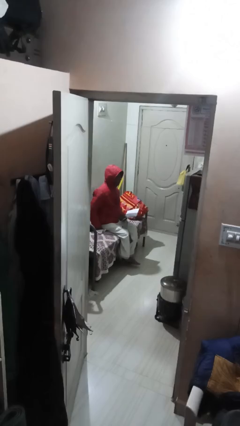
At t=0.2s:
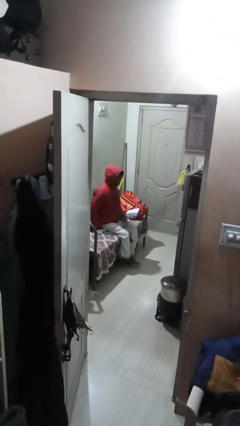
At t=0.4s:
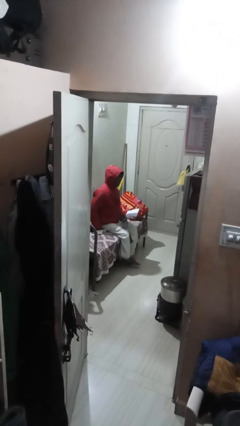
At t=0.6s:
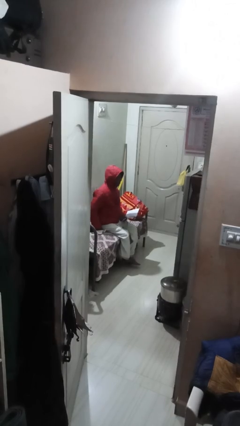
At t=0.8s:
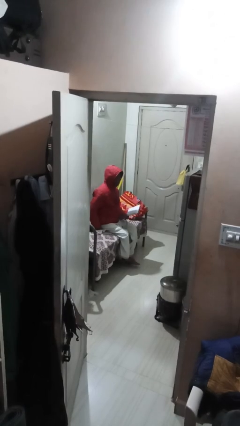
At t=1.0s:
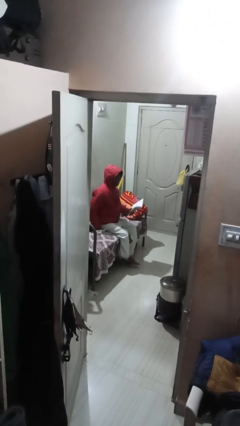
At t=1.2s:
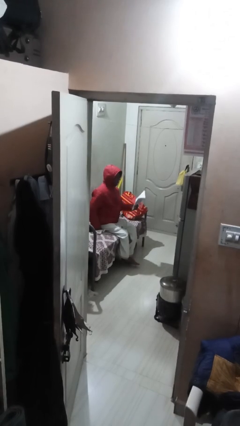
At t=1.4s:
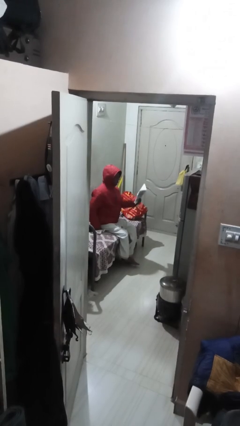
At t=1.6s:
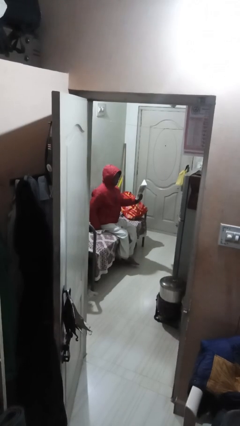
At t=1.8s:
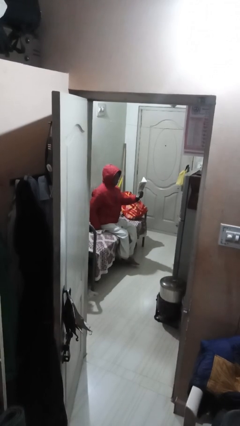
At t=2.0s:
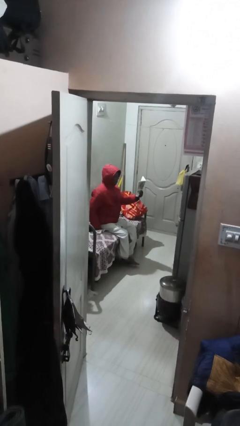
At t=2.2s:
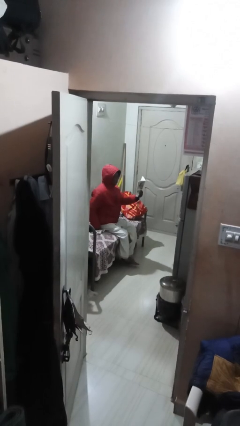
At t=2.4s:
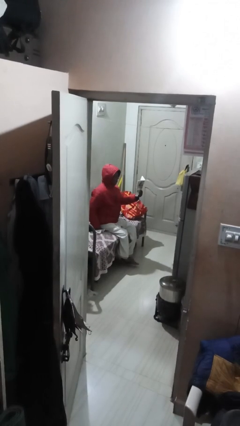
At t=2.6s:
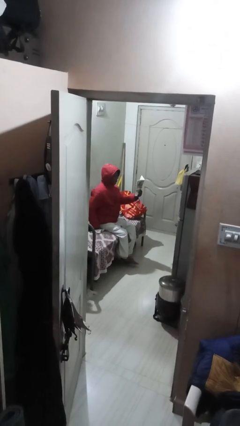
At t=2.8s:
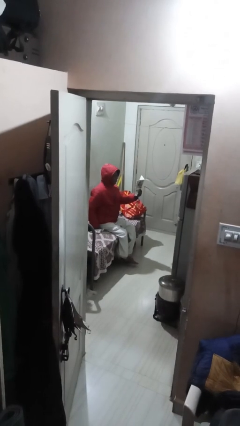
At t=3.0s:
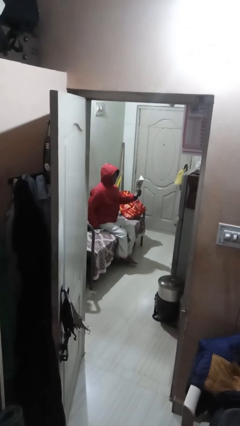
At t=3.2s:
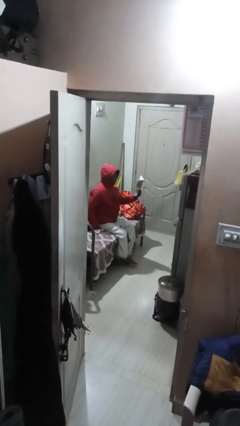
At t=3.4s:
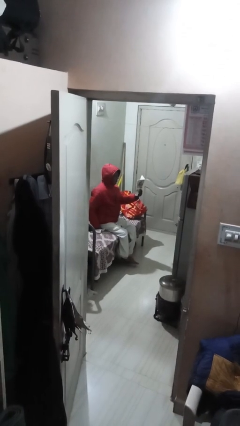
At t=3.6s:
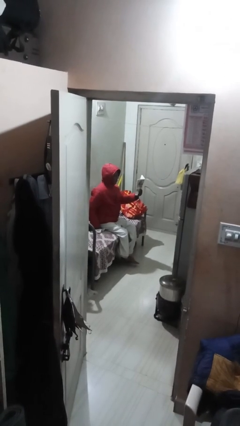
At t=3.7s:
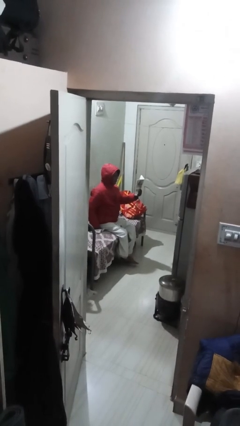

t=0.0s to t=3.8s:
person reads document

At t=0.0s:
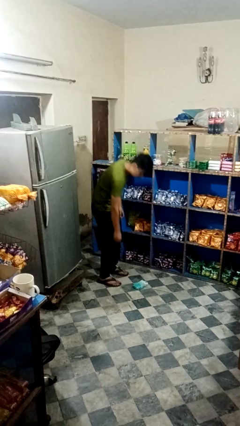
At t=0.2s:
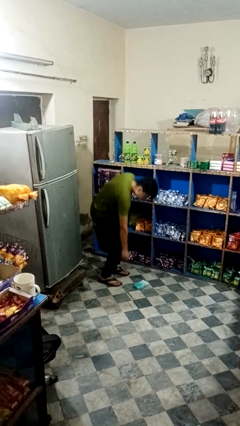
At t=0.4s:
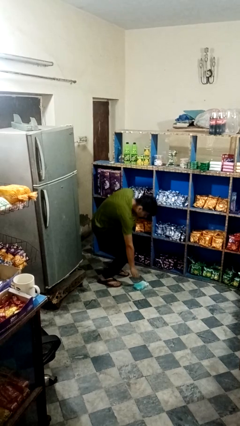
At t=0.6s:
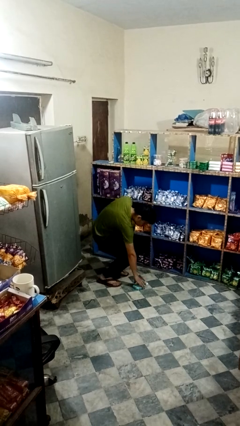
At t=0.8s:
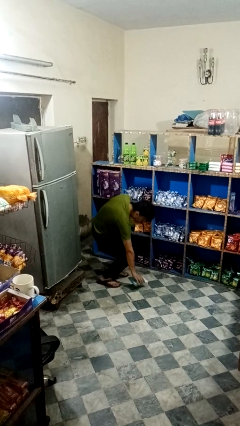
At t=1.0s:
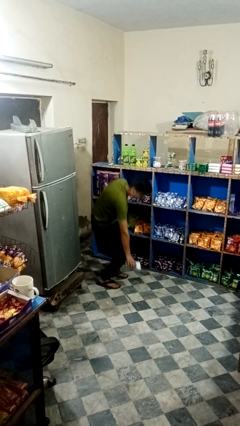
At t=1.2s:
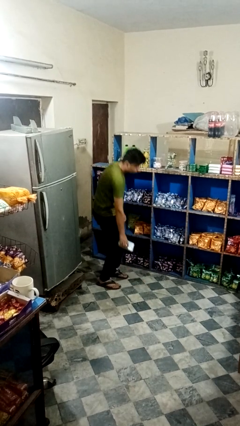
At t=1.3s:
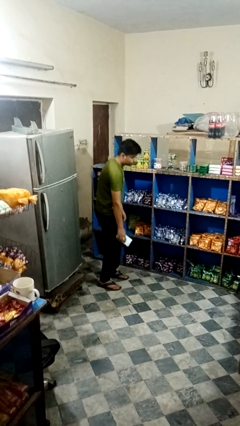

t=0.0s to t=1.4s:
person picks up object from floor

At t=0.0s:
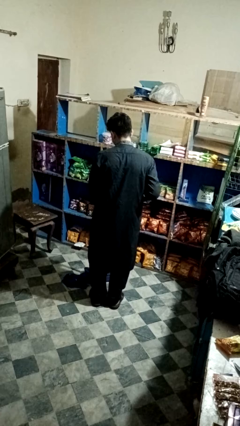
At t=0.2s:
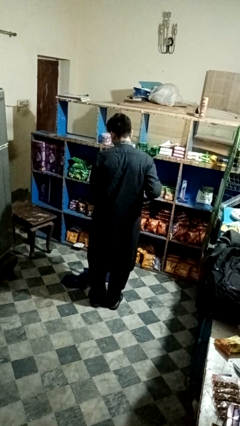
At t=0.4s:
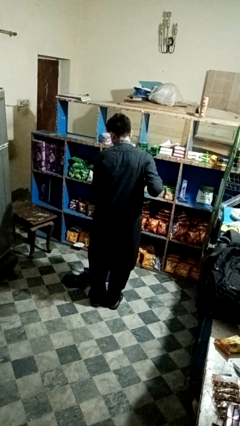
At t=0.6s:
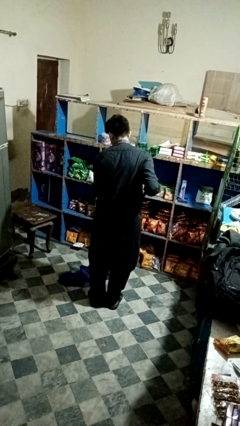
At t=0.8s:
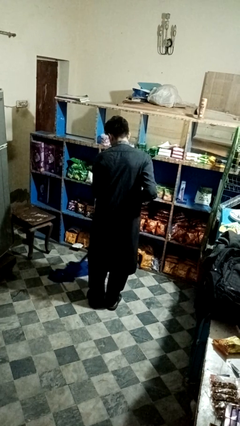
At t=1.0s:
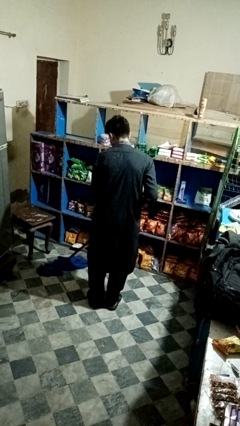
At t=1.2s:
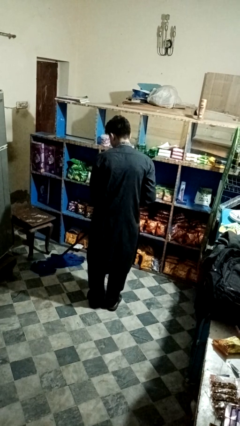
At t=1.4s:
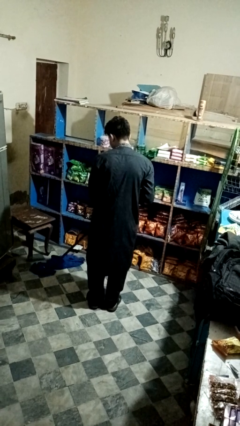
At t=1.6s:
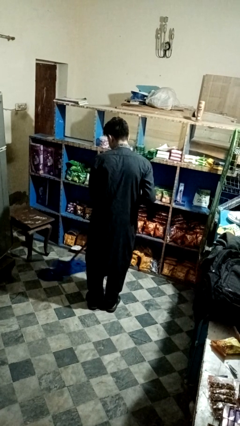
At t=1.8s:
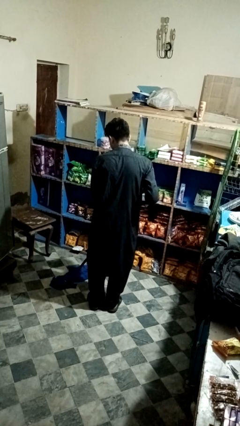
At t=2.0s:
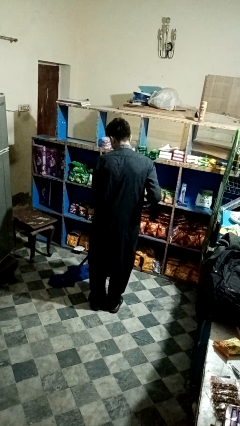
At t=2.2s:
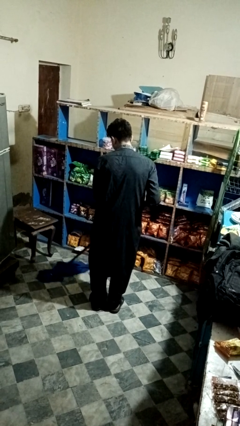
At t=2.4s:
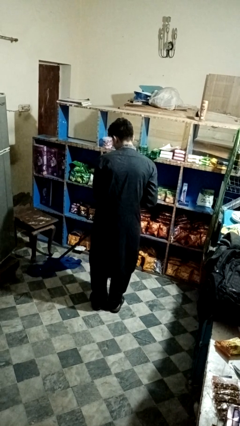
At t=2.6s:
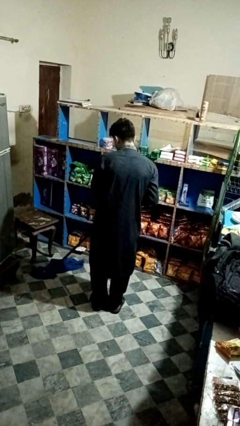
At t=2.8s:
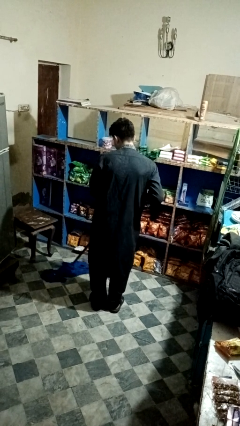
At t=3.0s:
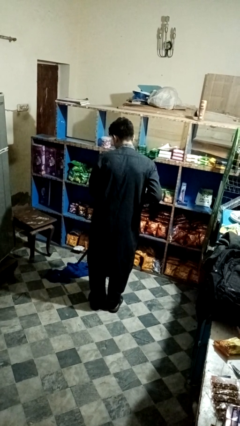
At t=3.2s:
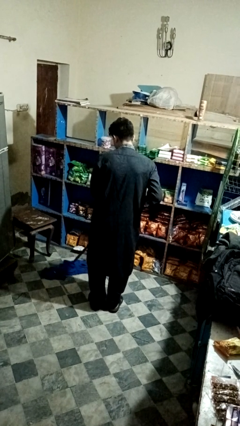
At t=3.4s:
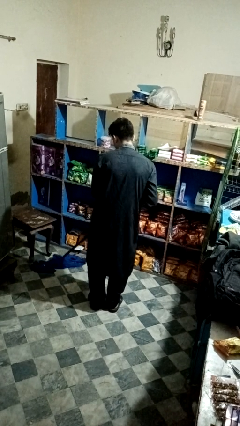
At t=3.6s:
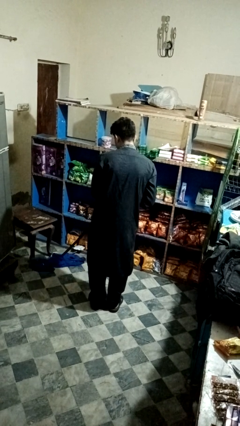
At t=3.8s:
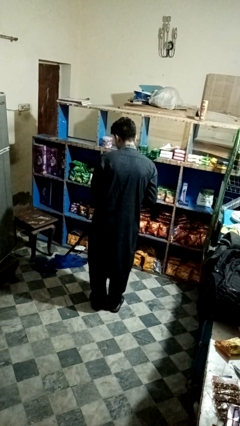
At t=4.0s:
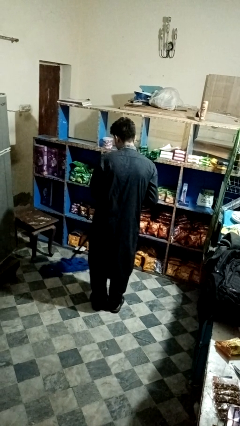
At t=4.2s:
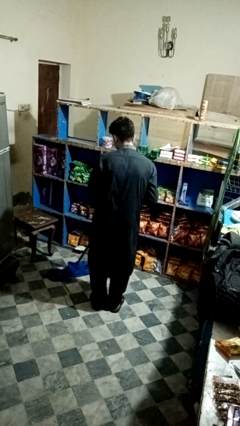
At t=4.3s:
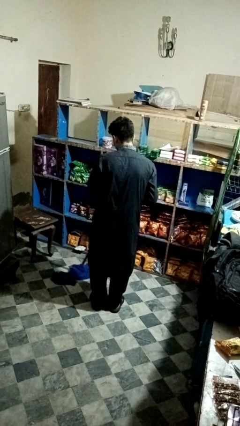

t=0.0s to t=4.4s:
person mops

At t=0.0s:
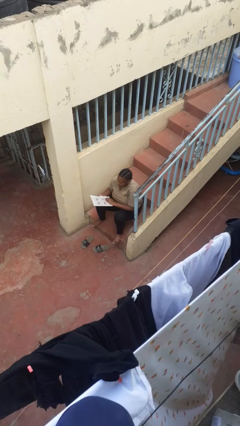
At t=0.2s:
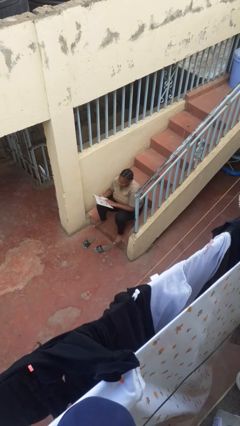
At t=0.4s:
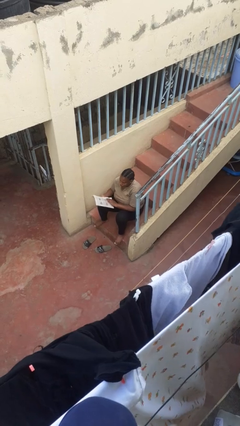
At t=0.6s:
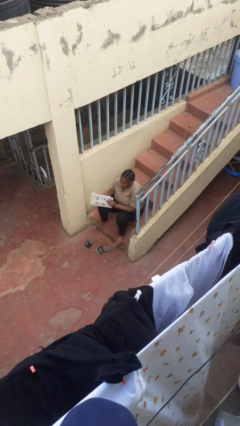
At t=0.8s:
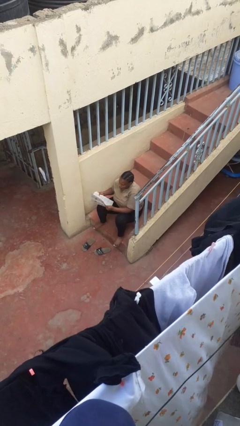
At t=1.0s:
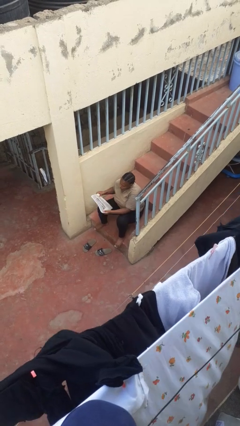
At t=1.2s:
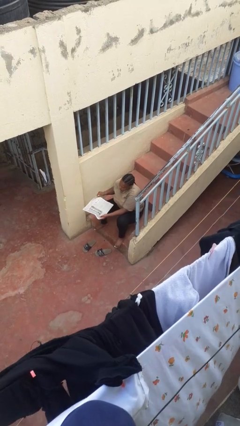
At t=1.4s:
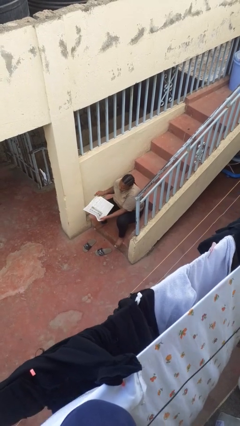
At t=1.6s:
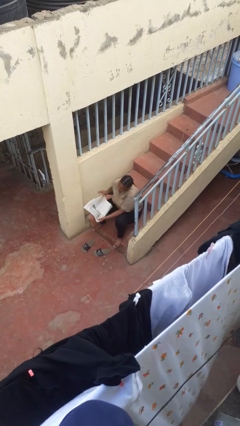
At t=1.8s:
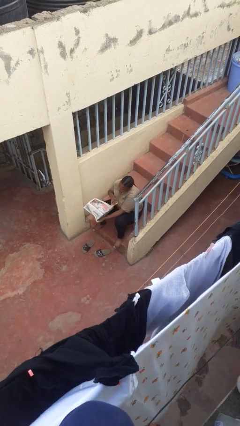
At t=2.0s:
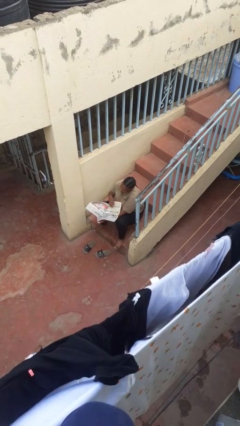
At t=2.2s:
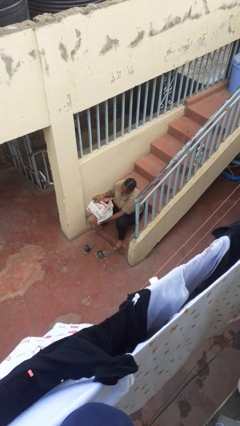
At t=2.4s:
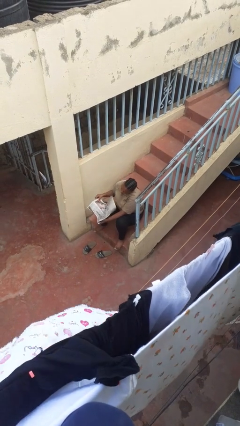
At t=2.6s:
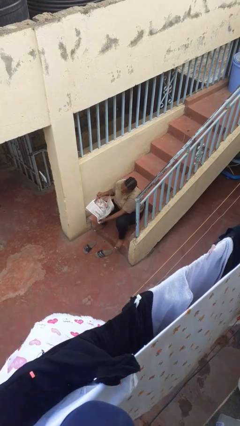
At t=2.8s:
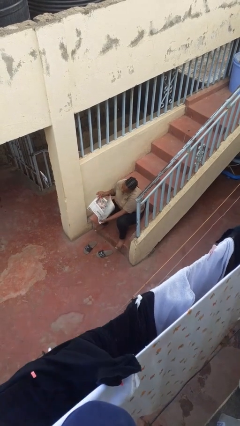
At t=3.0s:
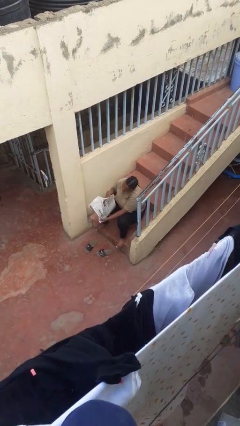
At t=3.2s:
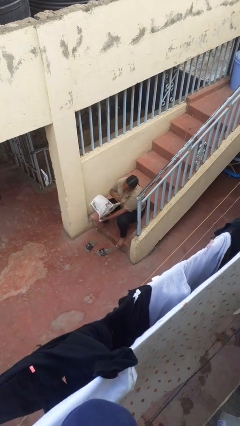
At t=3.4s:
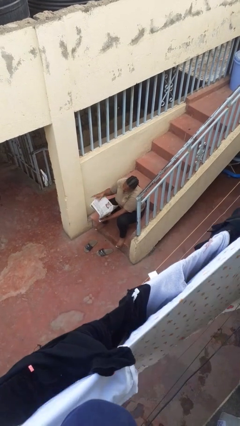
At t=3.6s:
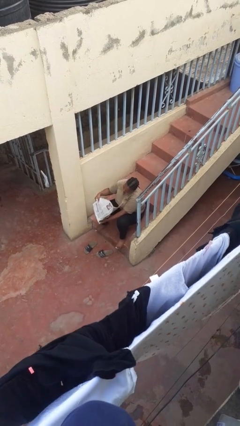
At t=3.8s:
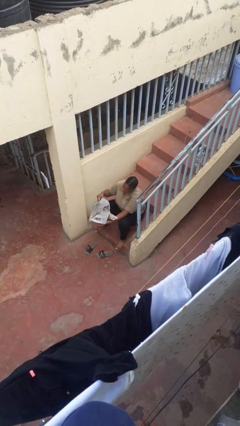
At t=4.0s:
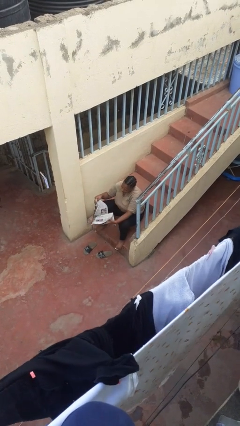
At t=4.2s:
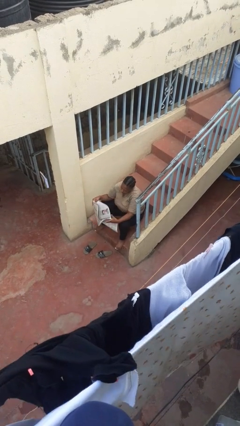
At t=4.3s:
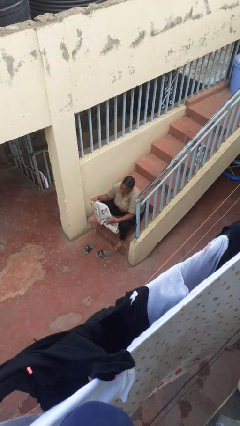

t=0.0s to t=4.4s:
person reads newspaper

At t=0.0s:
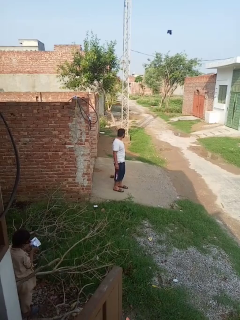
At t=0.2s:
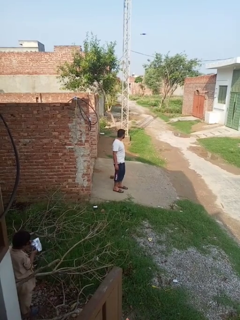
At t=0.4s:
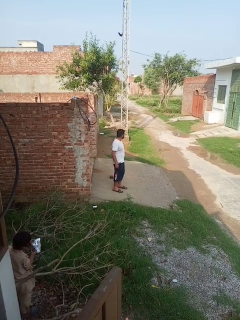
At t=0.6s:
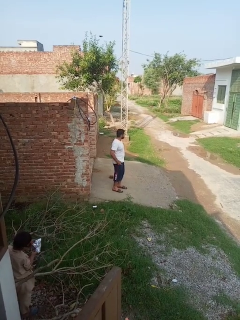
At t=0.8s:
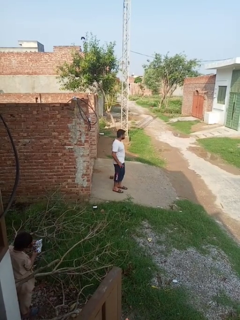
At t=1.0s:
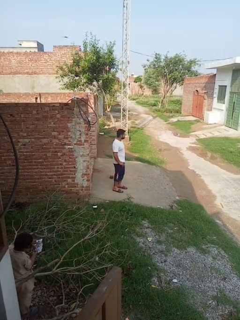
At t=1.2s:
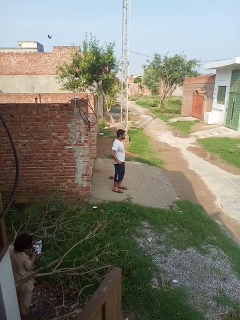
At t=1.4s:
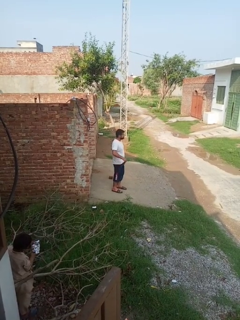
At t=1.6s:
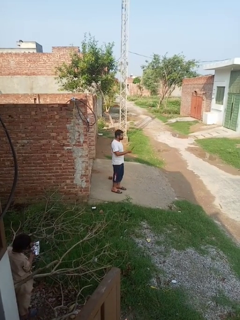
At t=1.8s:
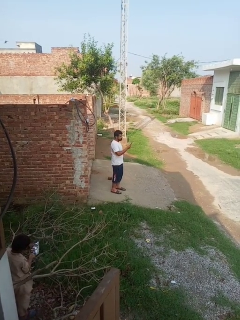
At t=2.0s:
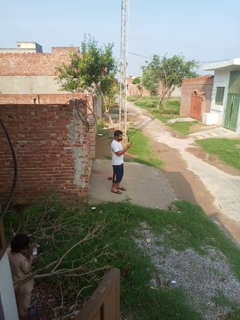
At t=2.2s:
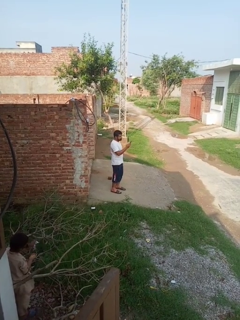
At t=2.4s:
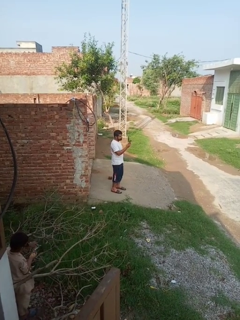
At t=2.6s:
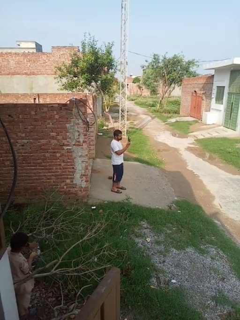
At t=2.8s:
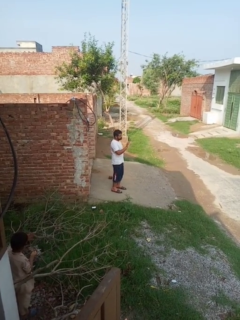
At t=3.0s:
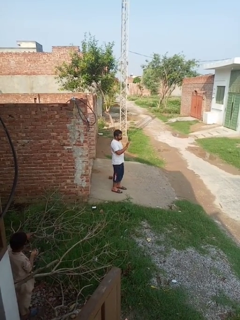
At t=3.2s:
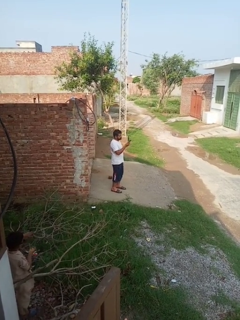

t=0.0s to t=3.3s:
person takes phone from pocket

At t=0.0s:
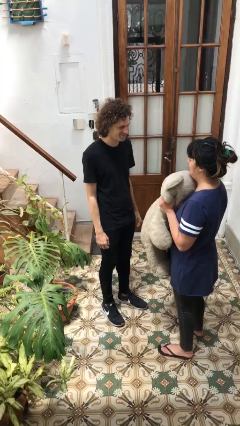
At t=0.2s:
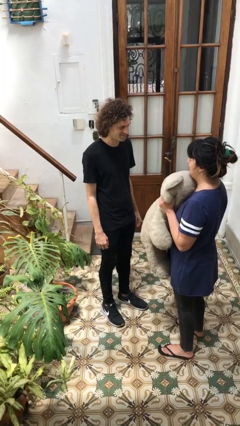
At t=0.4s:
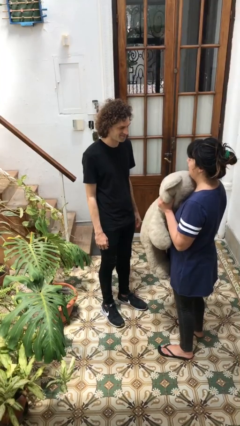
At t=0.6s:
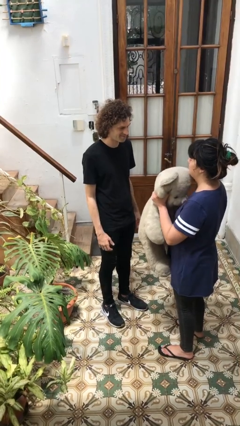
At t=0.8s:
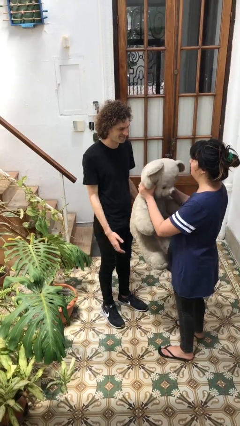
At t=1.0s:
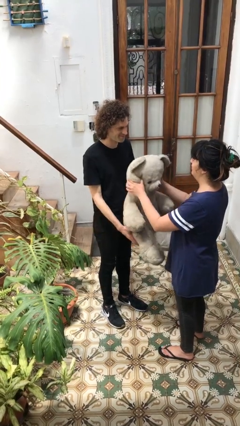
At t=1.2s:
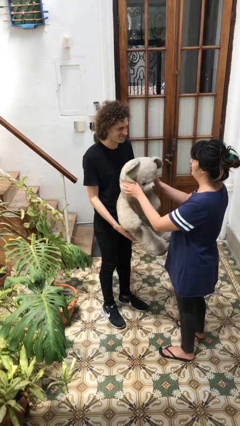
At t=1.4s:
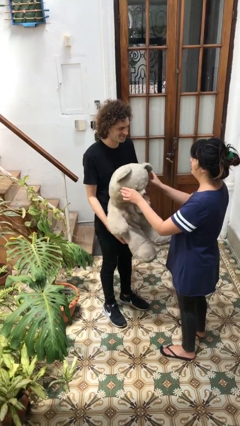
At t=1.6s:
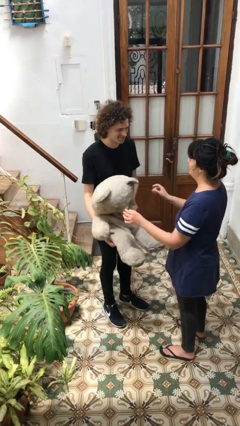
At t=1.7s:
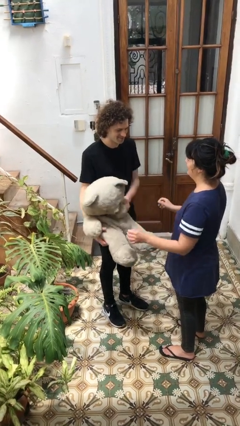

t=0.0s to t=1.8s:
person transfers object to person
